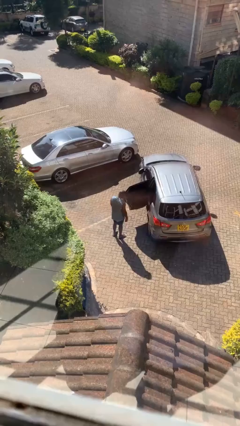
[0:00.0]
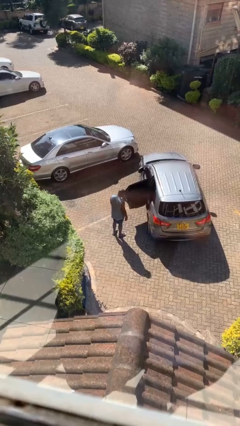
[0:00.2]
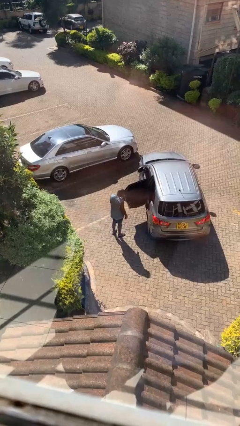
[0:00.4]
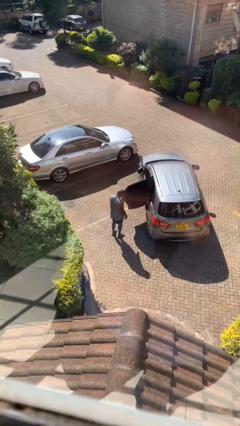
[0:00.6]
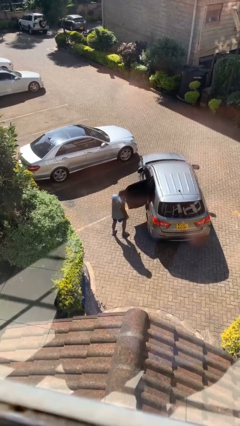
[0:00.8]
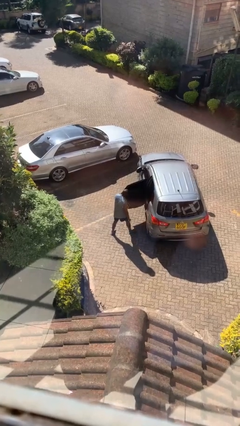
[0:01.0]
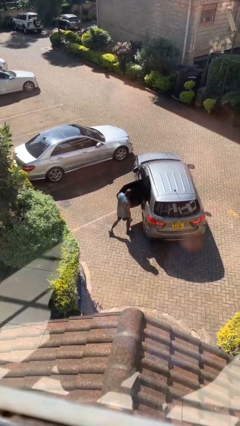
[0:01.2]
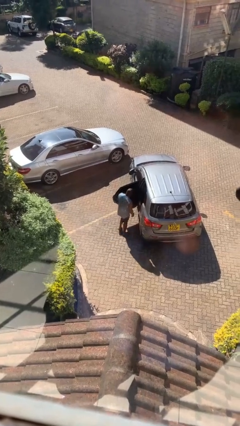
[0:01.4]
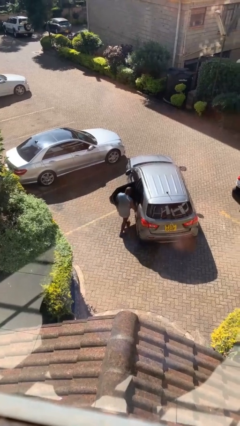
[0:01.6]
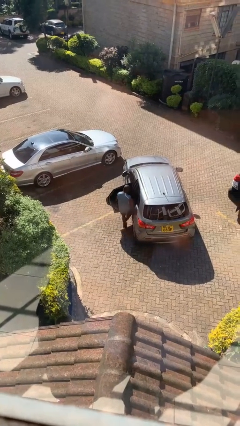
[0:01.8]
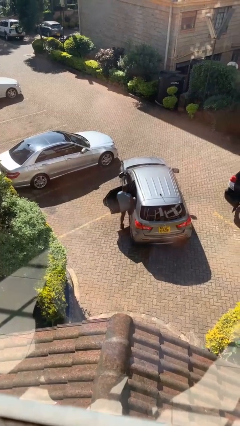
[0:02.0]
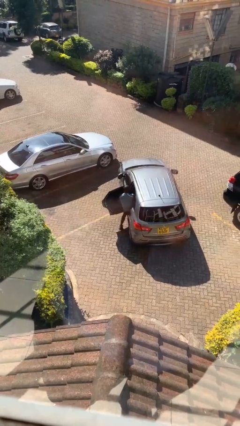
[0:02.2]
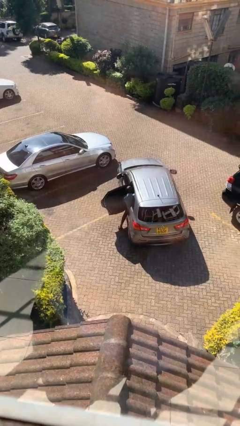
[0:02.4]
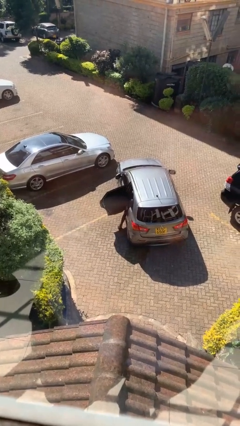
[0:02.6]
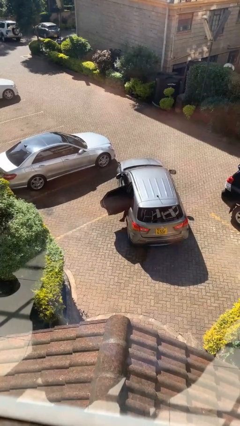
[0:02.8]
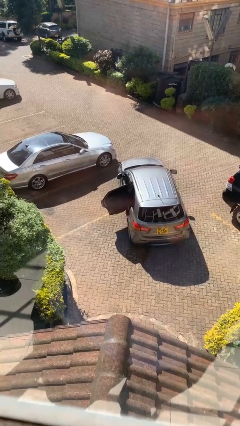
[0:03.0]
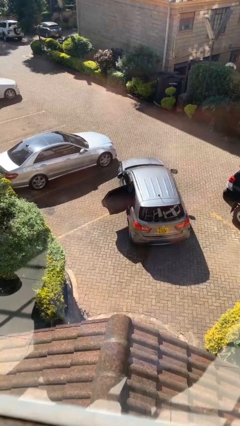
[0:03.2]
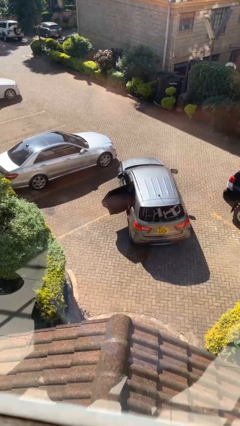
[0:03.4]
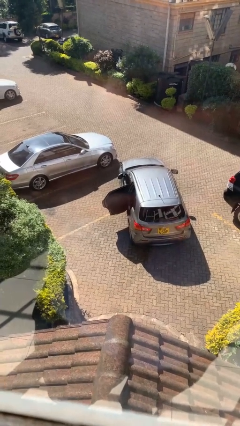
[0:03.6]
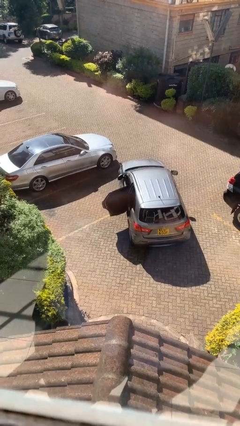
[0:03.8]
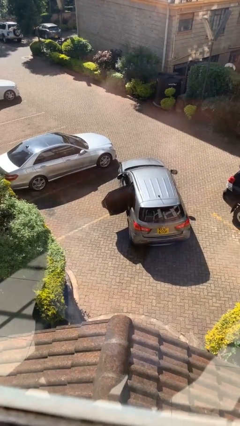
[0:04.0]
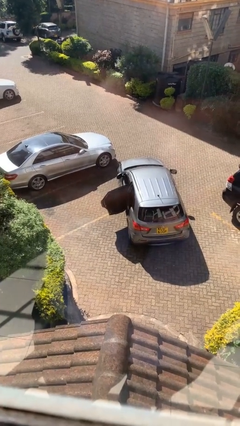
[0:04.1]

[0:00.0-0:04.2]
person enters car

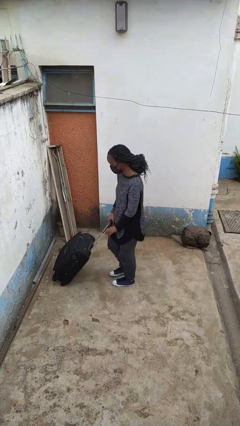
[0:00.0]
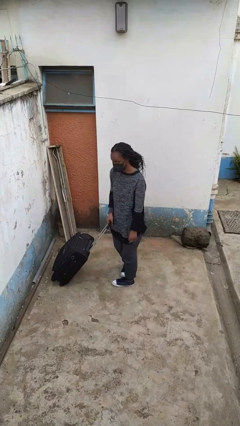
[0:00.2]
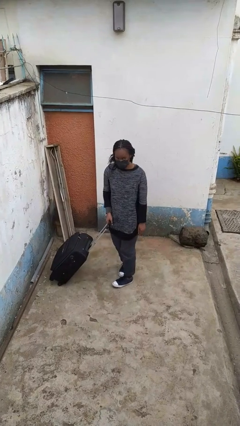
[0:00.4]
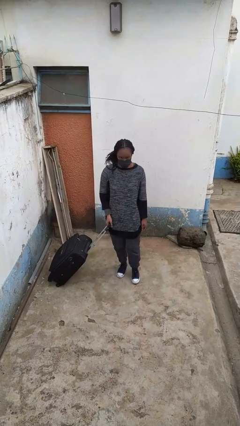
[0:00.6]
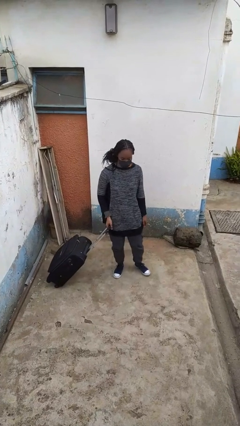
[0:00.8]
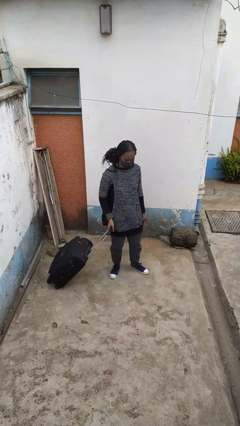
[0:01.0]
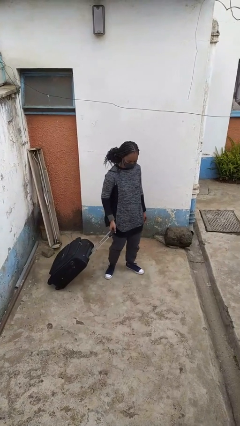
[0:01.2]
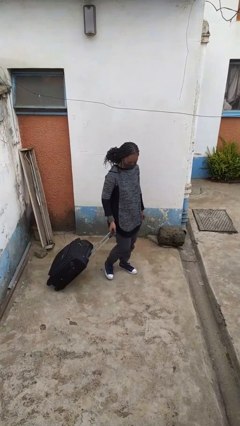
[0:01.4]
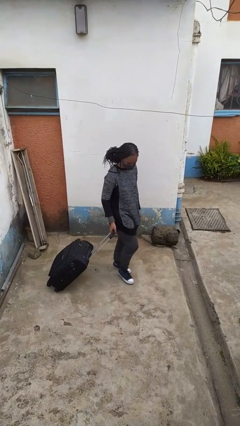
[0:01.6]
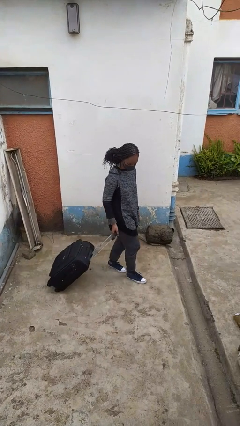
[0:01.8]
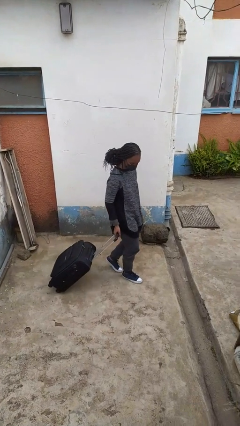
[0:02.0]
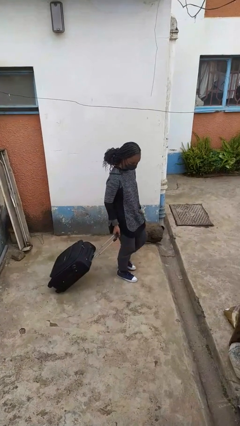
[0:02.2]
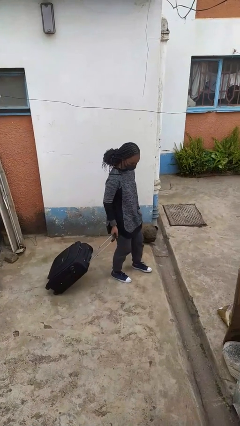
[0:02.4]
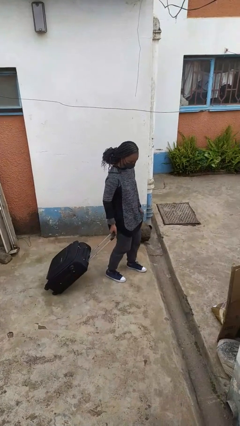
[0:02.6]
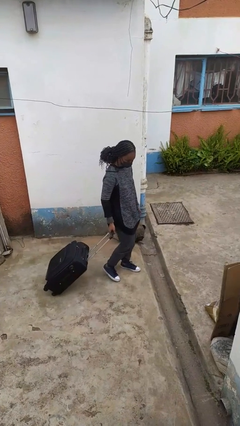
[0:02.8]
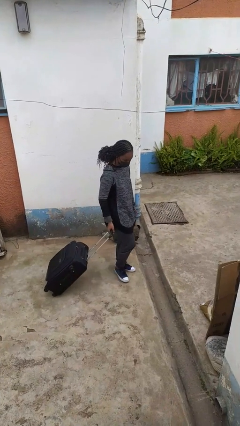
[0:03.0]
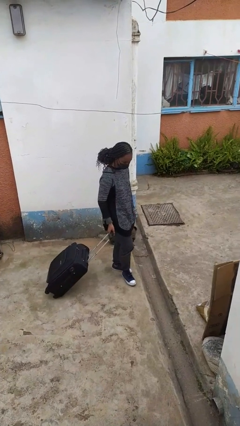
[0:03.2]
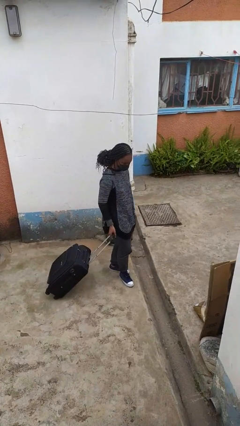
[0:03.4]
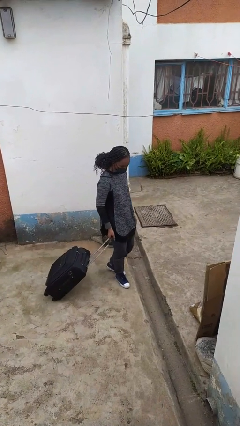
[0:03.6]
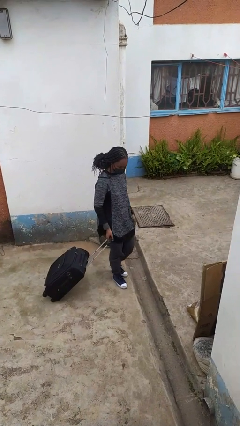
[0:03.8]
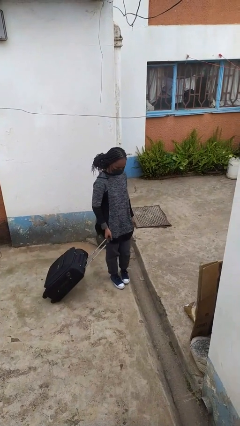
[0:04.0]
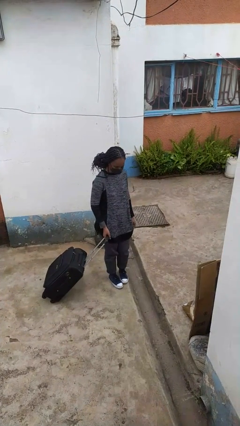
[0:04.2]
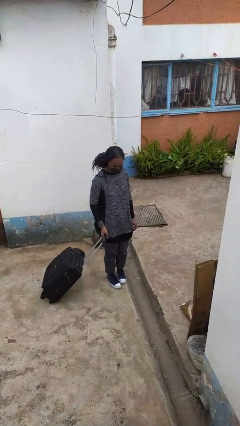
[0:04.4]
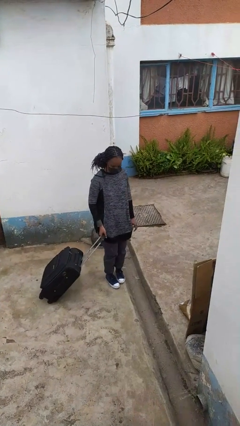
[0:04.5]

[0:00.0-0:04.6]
person pulls wheeled cart

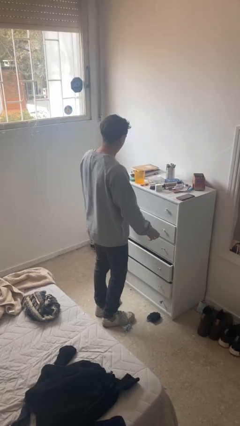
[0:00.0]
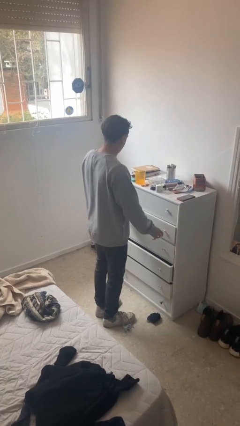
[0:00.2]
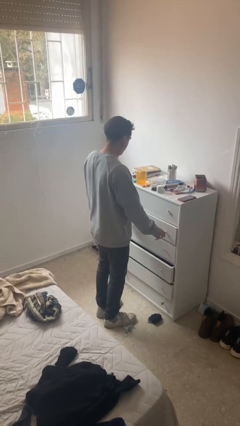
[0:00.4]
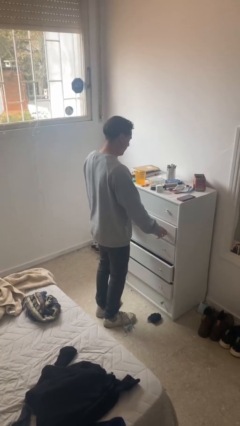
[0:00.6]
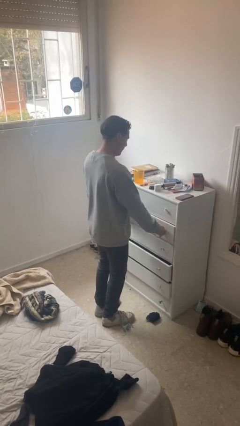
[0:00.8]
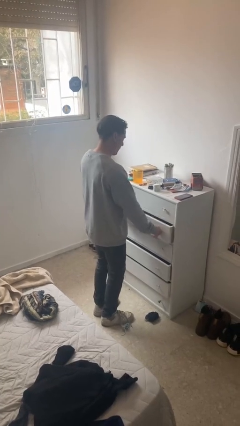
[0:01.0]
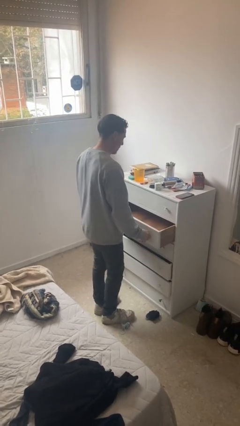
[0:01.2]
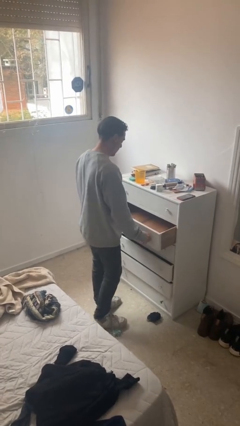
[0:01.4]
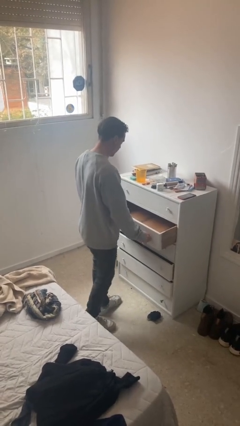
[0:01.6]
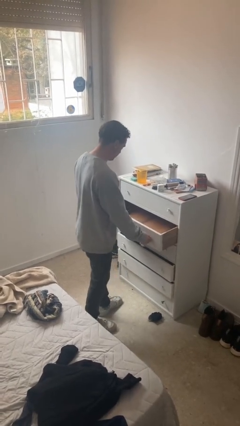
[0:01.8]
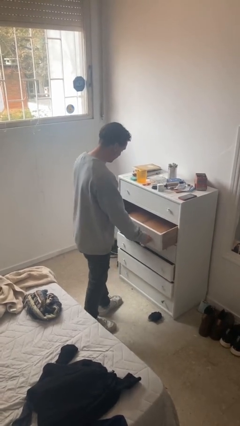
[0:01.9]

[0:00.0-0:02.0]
person opens dresser drawer

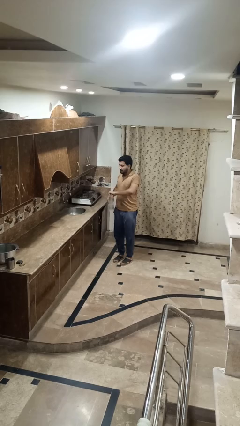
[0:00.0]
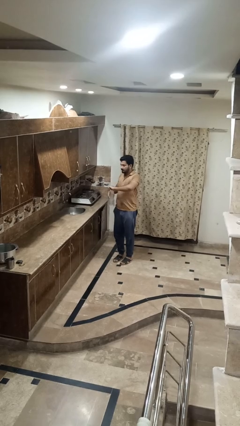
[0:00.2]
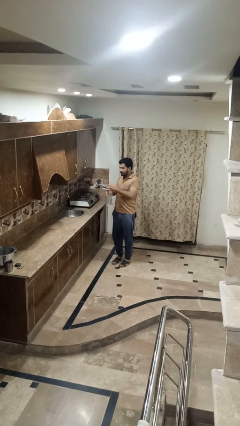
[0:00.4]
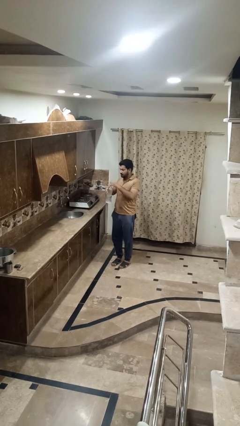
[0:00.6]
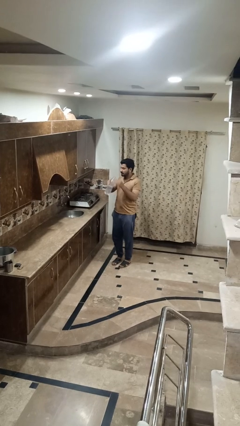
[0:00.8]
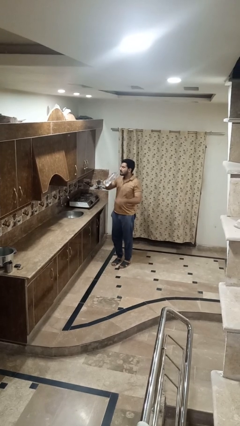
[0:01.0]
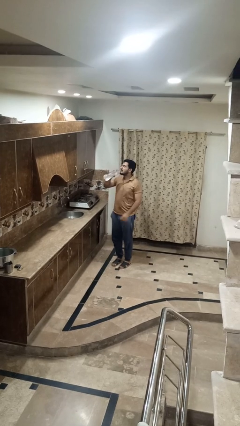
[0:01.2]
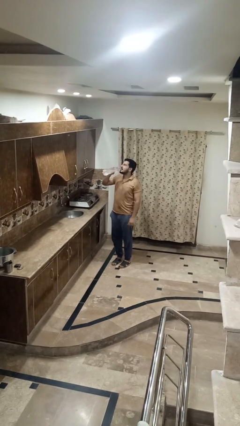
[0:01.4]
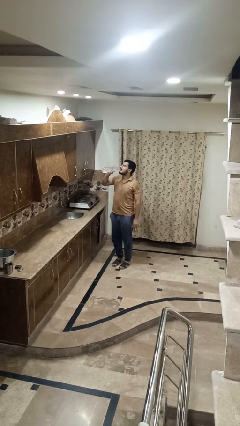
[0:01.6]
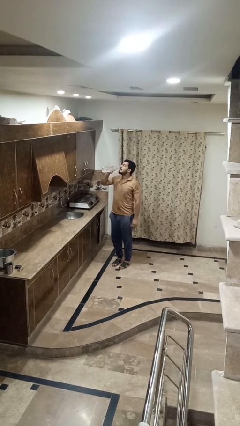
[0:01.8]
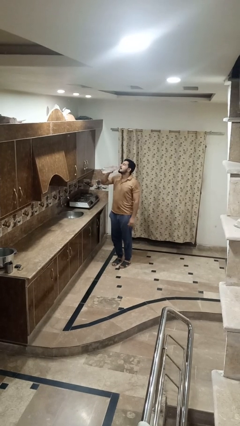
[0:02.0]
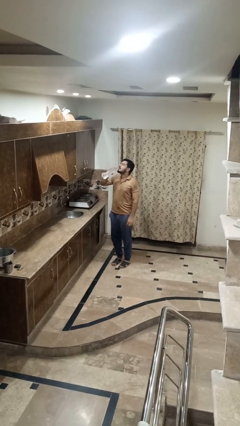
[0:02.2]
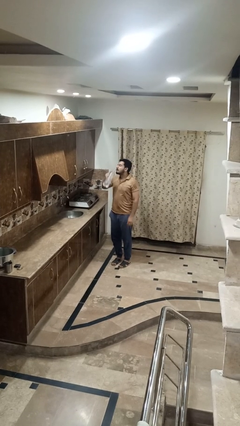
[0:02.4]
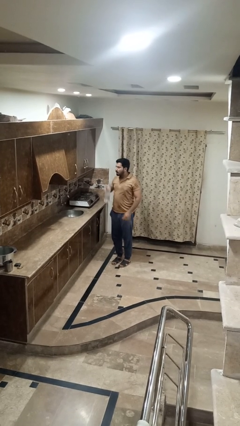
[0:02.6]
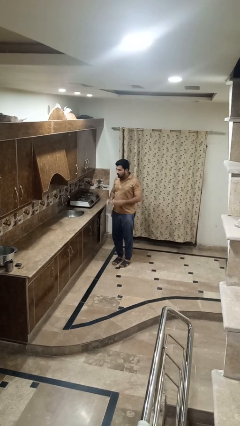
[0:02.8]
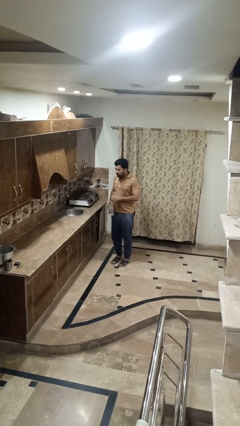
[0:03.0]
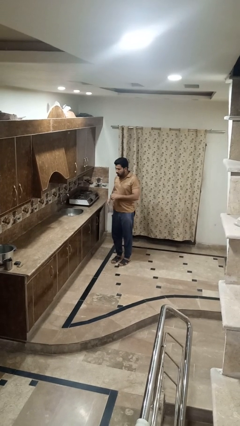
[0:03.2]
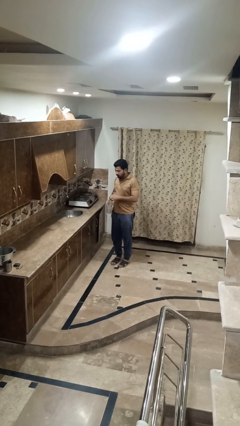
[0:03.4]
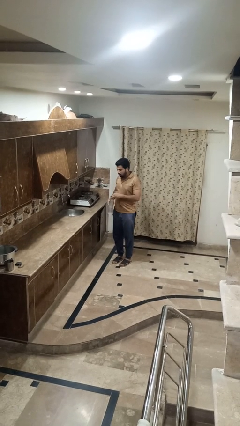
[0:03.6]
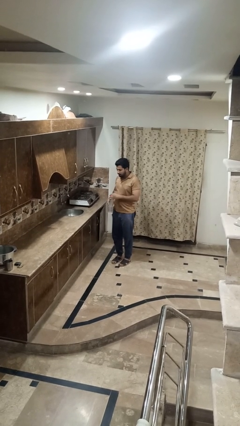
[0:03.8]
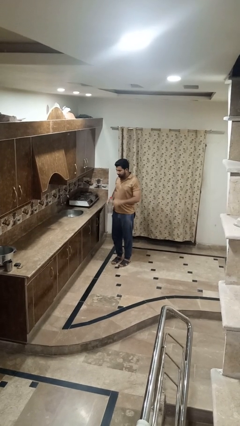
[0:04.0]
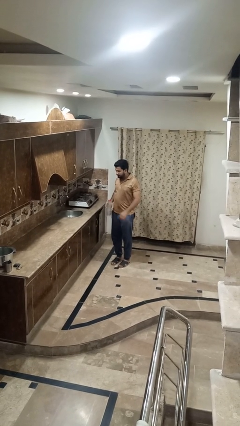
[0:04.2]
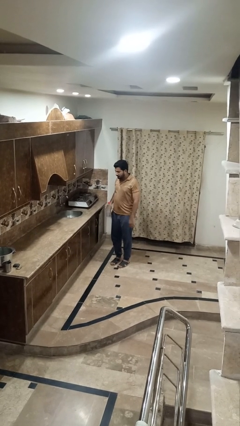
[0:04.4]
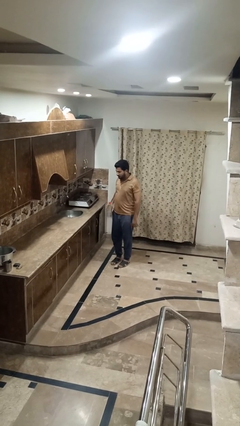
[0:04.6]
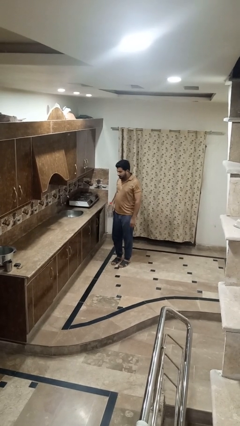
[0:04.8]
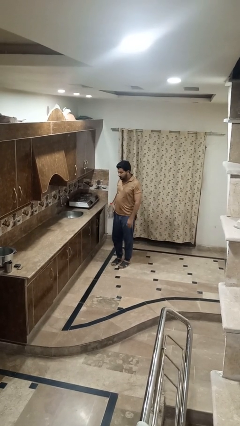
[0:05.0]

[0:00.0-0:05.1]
person drinks from bottle

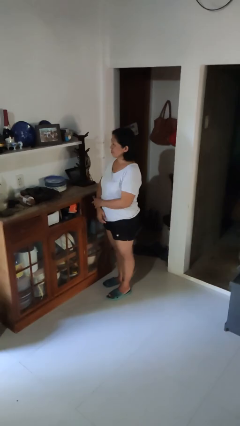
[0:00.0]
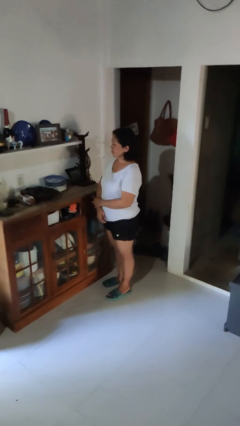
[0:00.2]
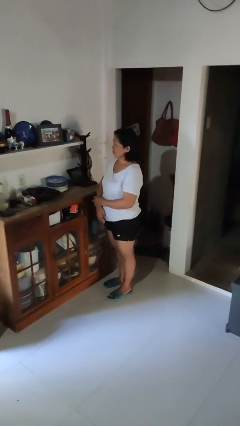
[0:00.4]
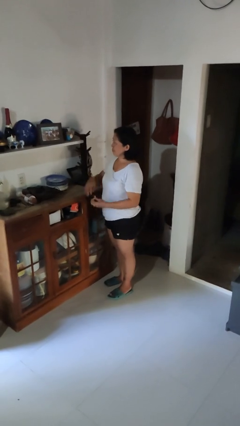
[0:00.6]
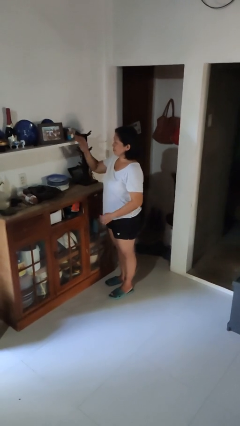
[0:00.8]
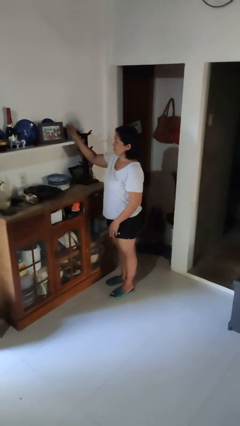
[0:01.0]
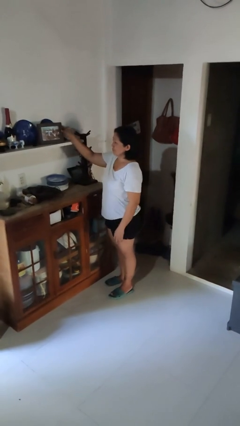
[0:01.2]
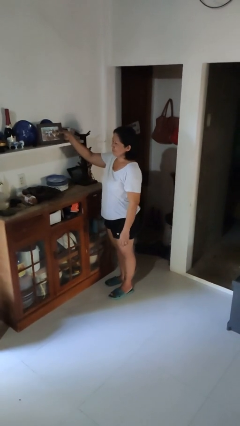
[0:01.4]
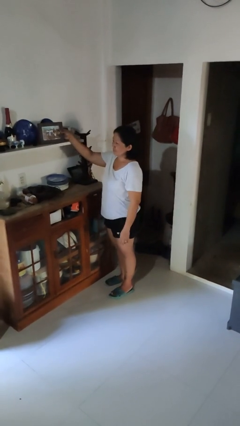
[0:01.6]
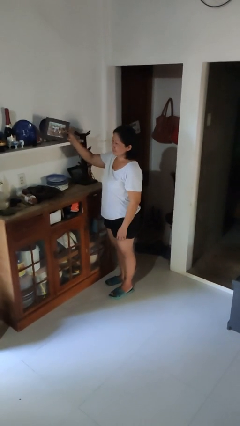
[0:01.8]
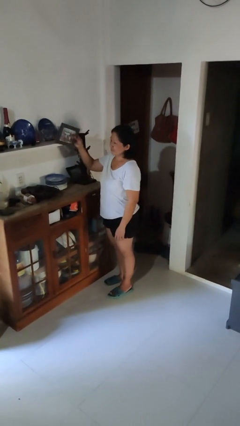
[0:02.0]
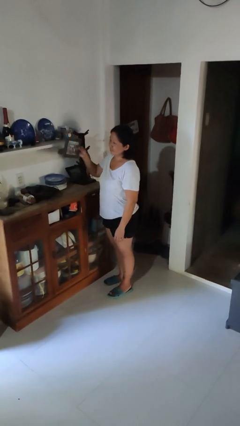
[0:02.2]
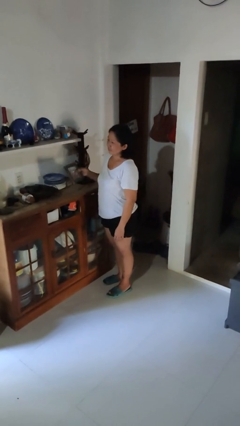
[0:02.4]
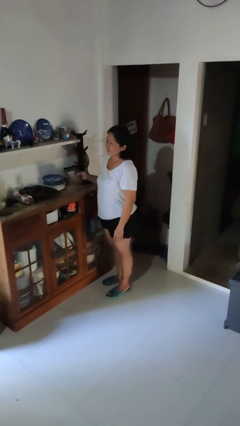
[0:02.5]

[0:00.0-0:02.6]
person picks up object from shelf
